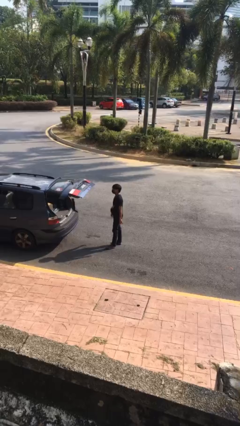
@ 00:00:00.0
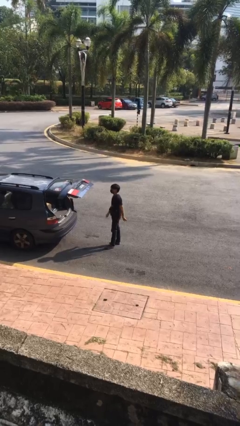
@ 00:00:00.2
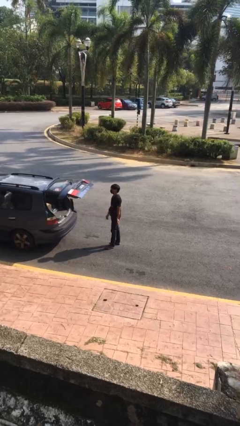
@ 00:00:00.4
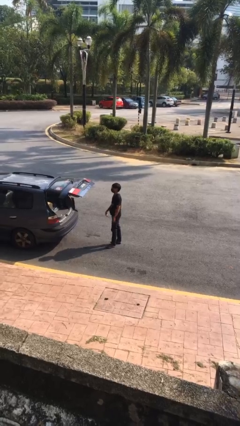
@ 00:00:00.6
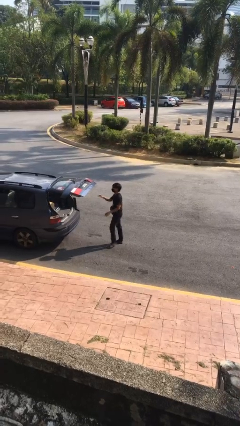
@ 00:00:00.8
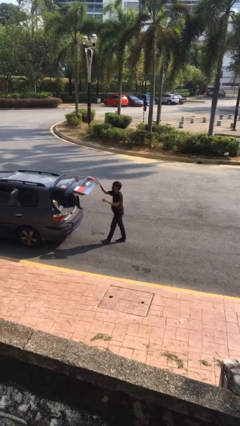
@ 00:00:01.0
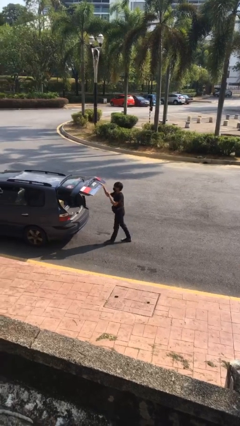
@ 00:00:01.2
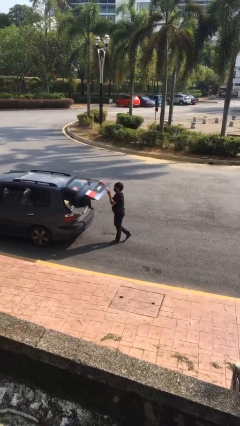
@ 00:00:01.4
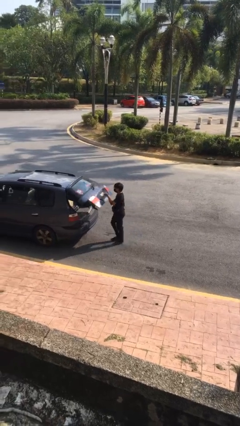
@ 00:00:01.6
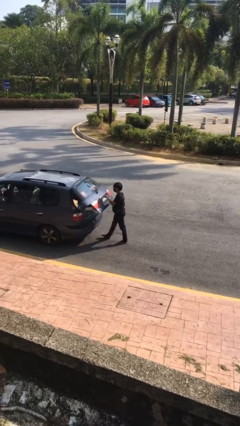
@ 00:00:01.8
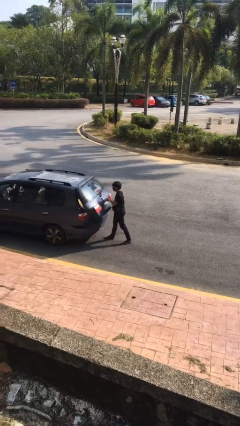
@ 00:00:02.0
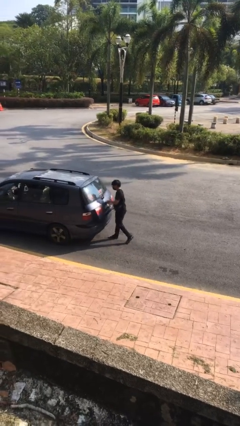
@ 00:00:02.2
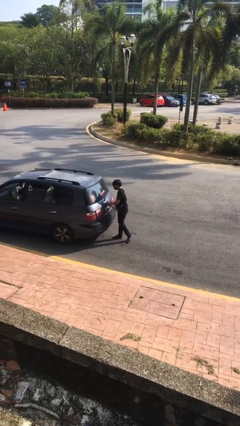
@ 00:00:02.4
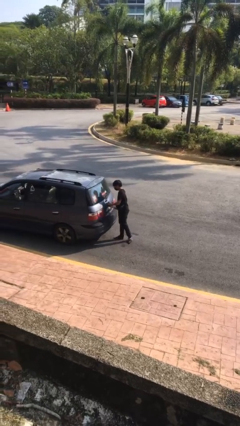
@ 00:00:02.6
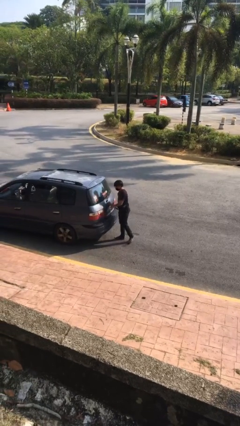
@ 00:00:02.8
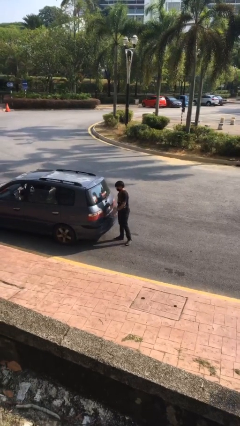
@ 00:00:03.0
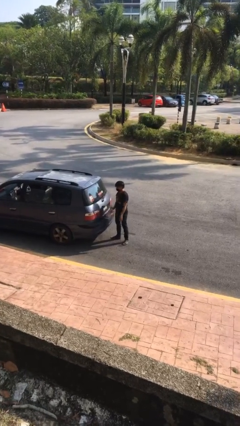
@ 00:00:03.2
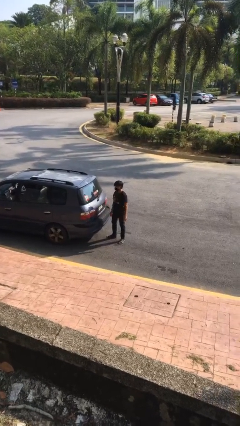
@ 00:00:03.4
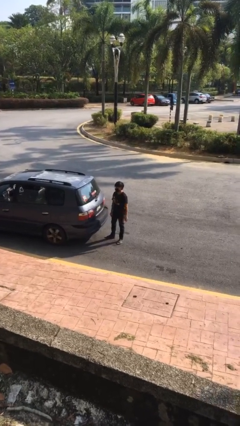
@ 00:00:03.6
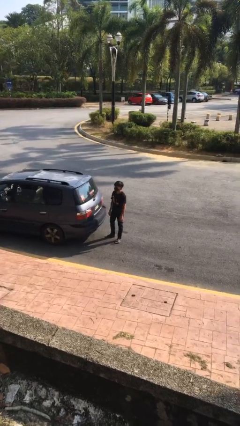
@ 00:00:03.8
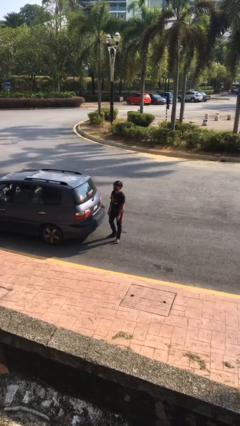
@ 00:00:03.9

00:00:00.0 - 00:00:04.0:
person closes car trunk

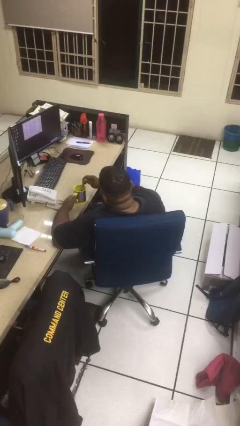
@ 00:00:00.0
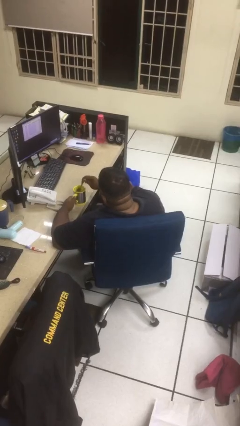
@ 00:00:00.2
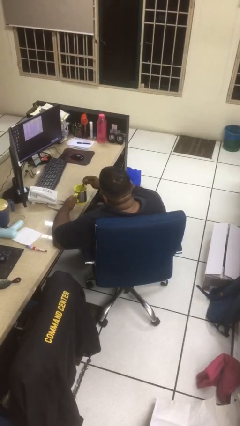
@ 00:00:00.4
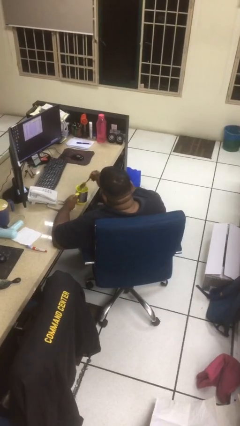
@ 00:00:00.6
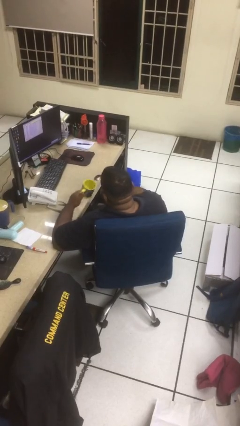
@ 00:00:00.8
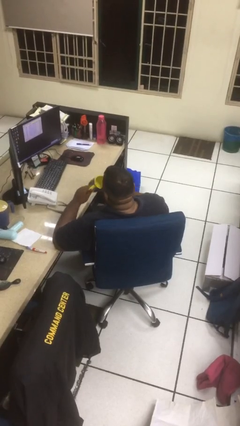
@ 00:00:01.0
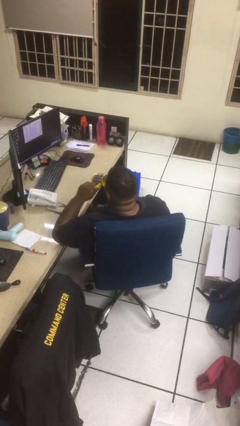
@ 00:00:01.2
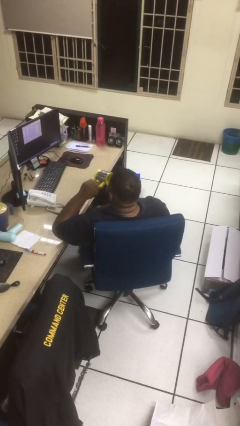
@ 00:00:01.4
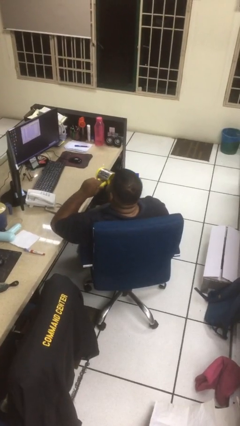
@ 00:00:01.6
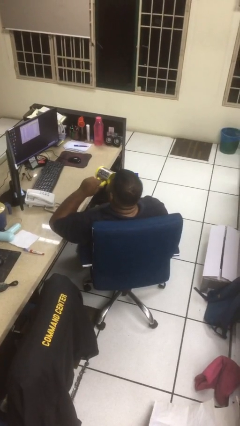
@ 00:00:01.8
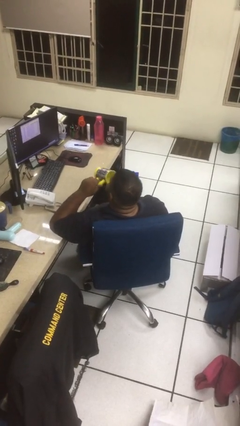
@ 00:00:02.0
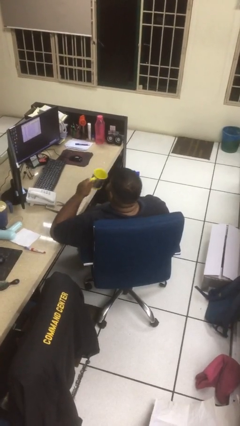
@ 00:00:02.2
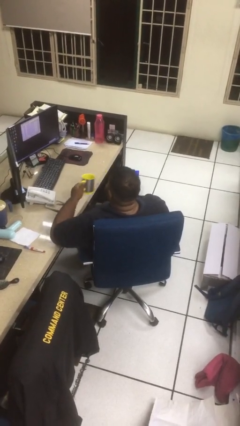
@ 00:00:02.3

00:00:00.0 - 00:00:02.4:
person drinks from mug

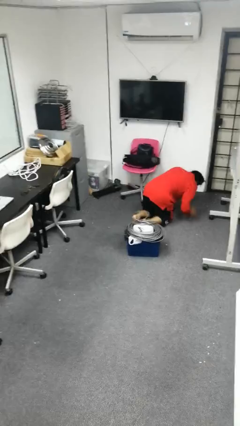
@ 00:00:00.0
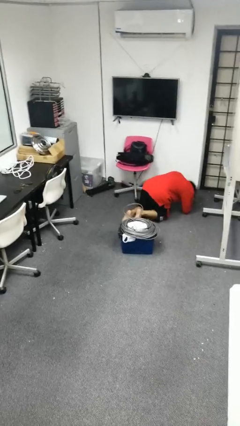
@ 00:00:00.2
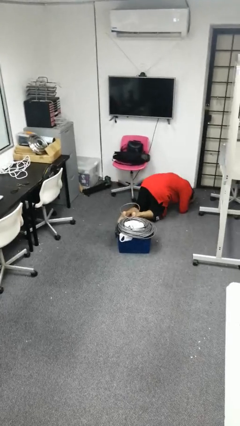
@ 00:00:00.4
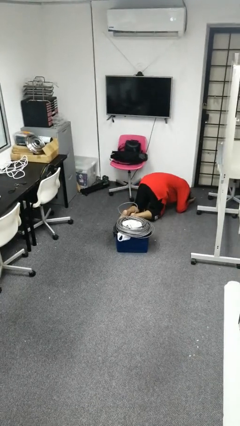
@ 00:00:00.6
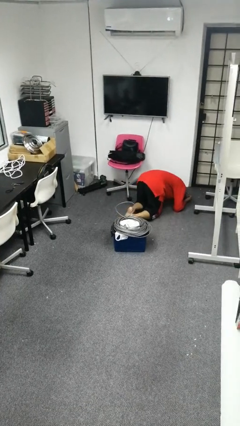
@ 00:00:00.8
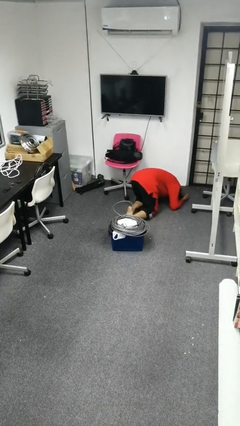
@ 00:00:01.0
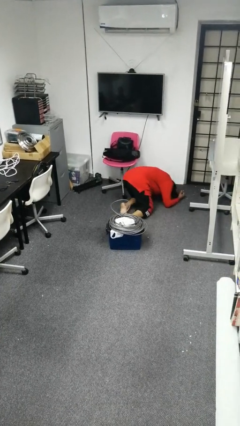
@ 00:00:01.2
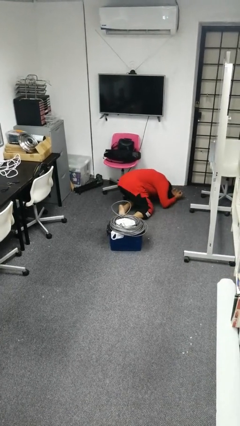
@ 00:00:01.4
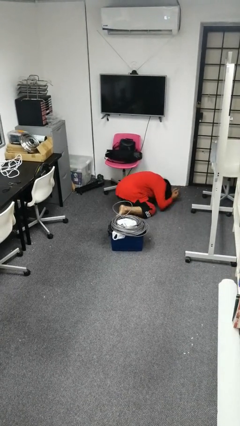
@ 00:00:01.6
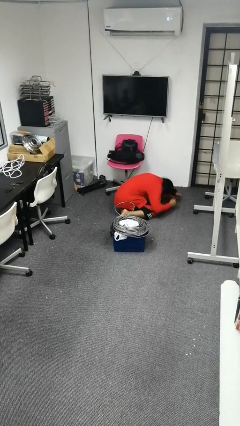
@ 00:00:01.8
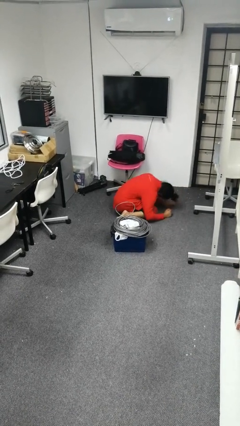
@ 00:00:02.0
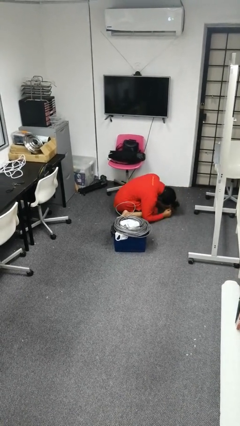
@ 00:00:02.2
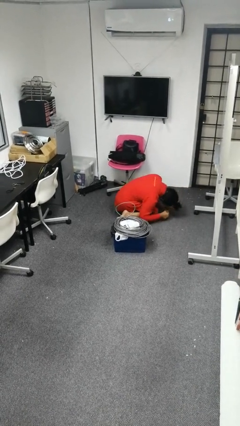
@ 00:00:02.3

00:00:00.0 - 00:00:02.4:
person lies down on floor

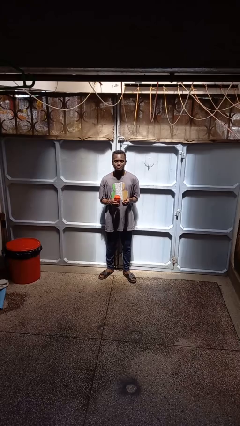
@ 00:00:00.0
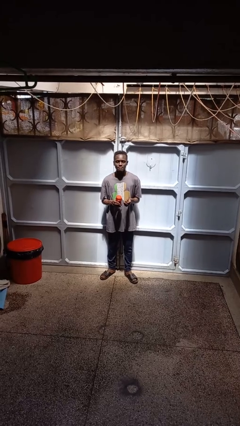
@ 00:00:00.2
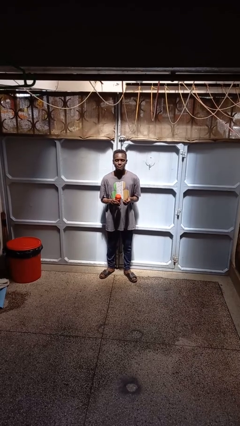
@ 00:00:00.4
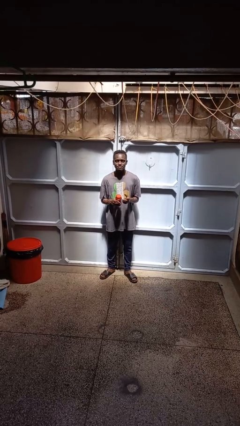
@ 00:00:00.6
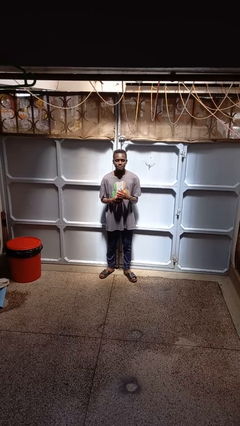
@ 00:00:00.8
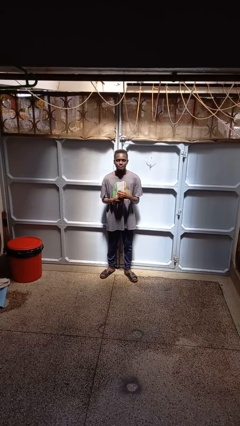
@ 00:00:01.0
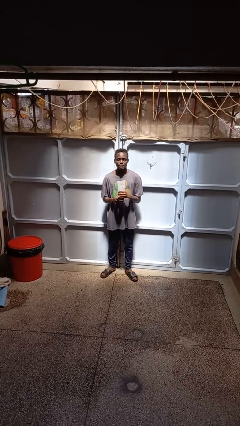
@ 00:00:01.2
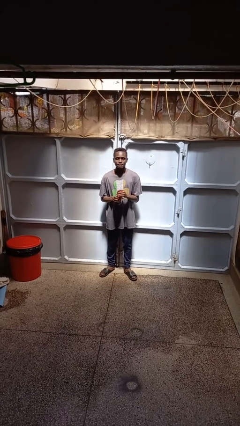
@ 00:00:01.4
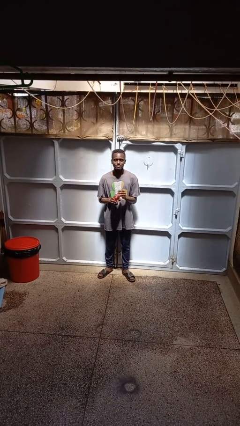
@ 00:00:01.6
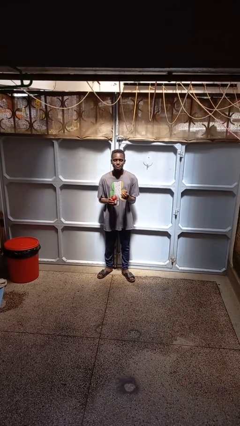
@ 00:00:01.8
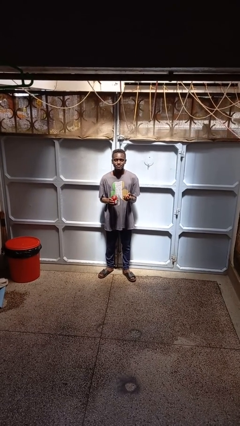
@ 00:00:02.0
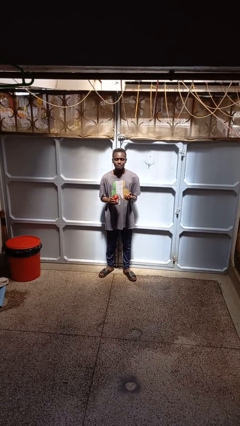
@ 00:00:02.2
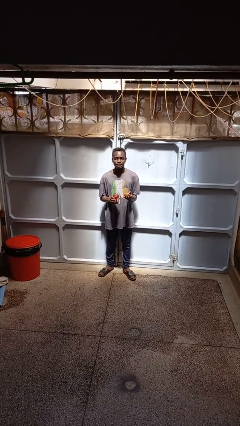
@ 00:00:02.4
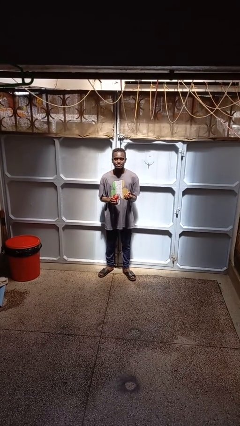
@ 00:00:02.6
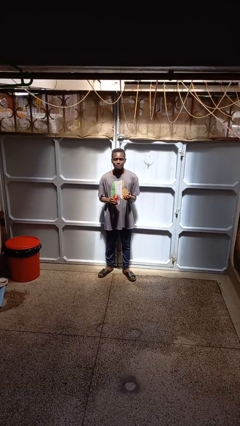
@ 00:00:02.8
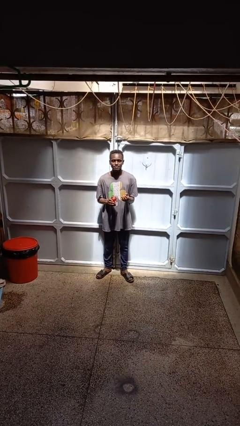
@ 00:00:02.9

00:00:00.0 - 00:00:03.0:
person opens jar

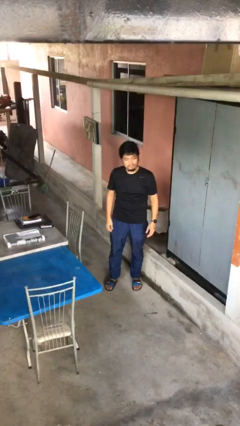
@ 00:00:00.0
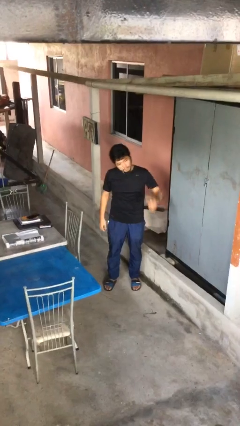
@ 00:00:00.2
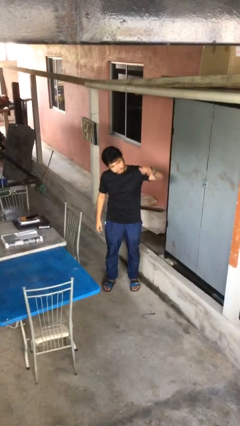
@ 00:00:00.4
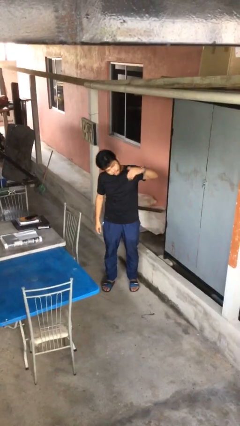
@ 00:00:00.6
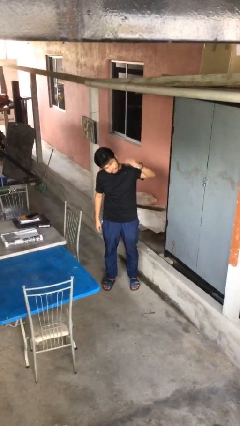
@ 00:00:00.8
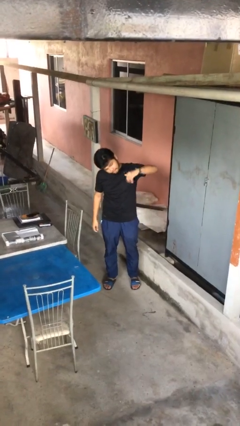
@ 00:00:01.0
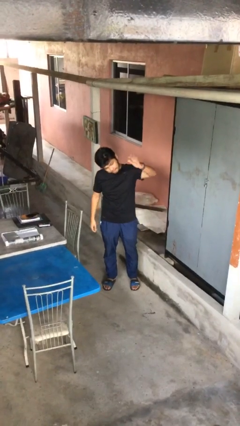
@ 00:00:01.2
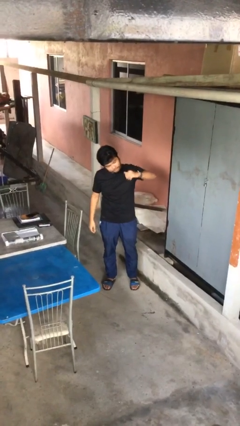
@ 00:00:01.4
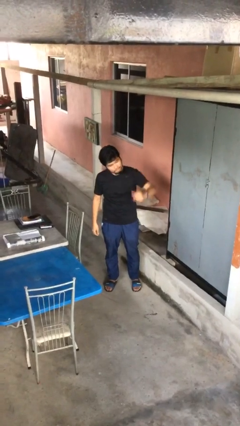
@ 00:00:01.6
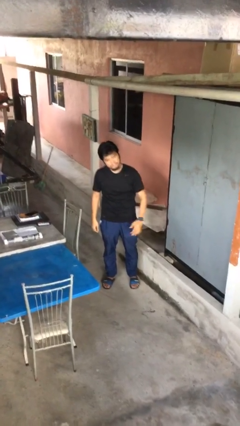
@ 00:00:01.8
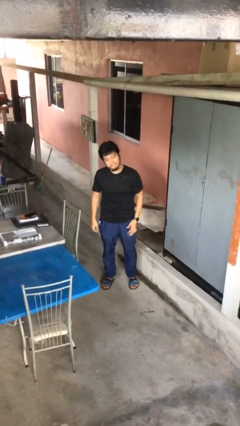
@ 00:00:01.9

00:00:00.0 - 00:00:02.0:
person gestures come here

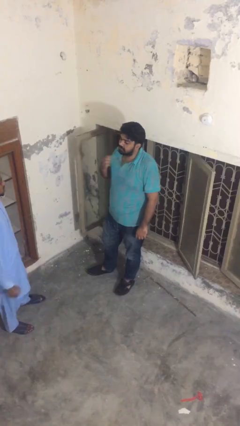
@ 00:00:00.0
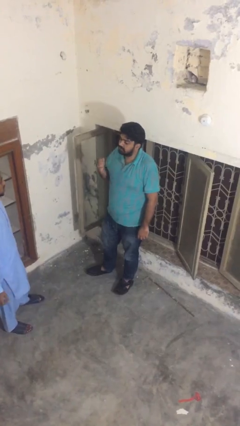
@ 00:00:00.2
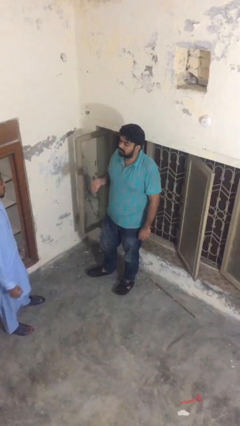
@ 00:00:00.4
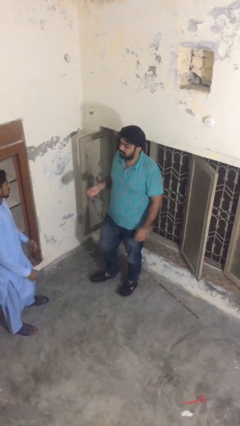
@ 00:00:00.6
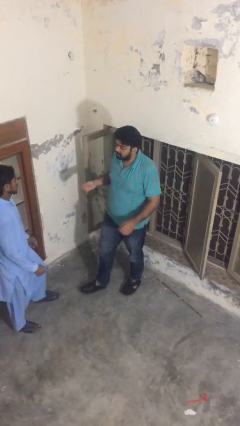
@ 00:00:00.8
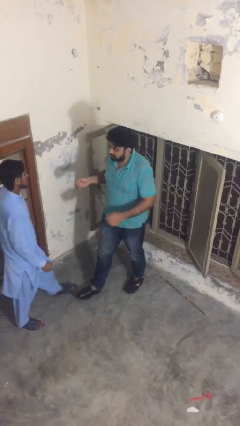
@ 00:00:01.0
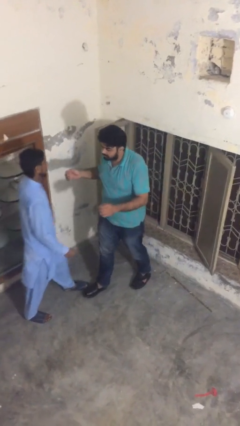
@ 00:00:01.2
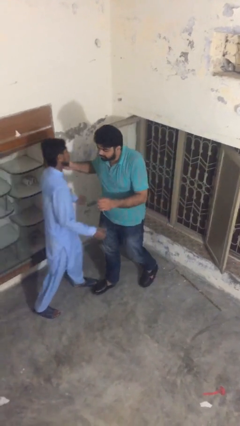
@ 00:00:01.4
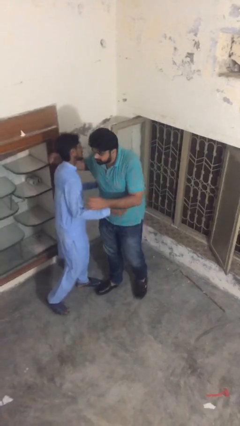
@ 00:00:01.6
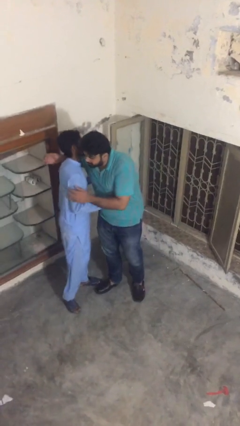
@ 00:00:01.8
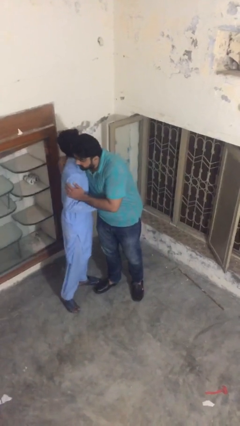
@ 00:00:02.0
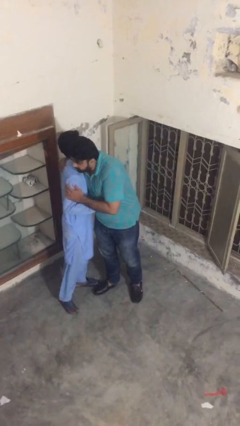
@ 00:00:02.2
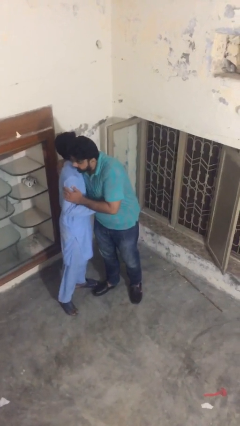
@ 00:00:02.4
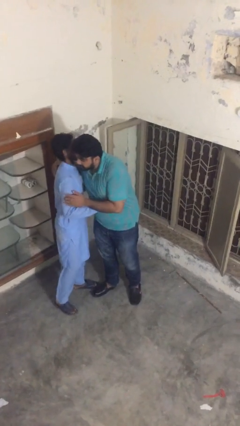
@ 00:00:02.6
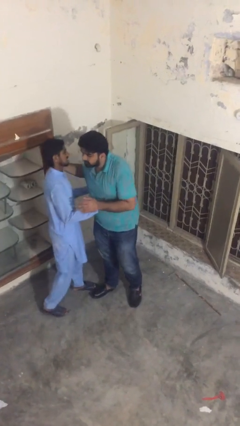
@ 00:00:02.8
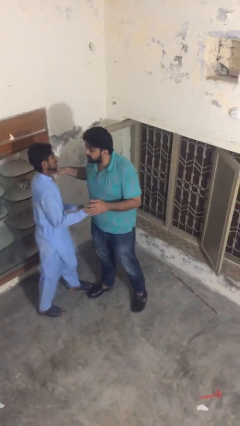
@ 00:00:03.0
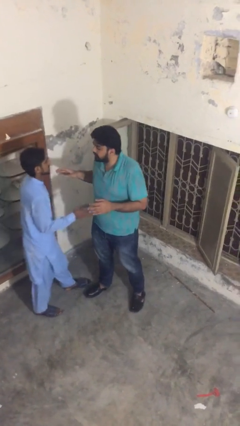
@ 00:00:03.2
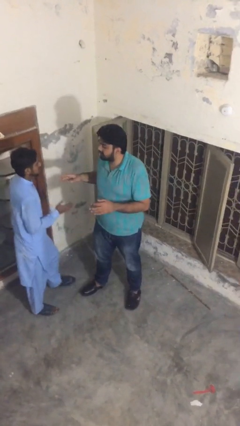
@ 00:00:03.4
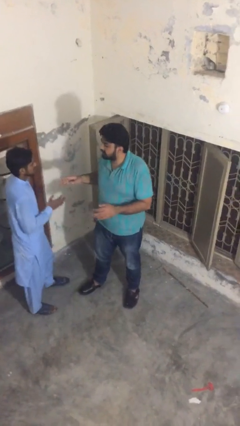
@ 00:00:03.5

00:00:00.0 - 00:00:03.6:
person embraces person
